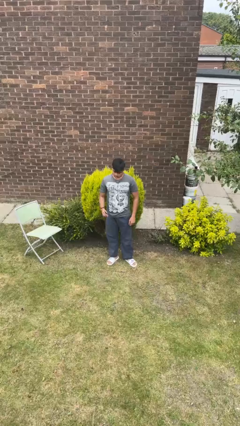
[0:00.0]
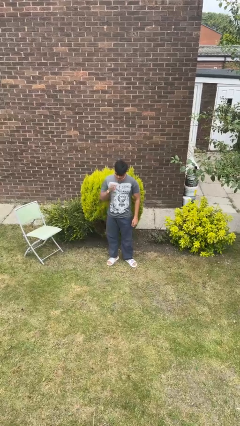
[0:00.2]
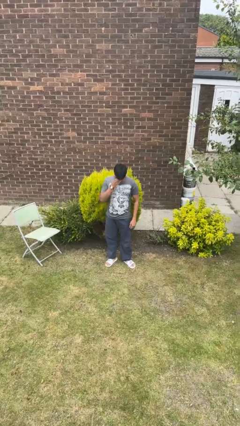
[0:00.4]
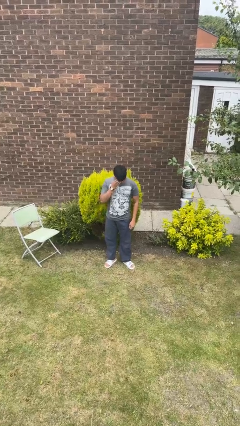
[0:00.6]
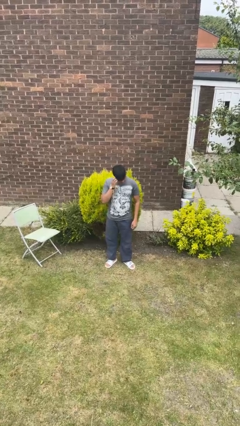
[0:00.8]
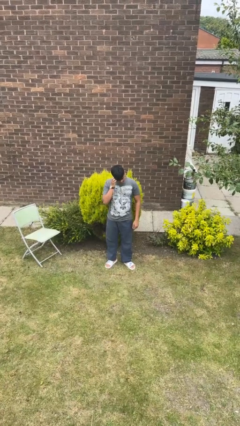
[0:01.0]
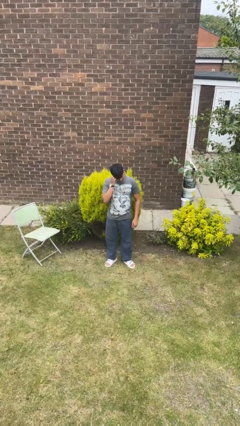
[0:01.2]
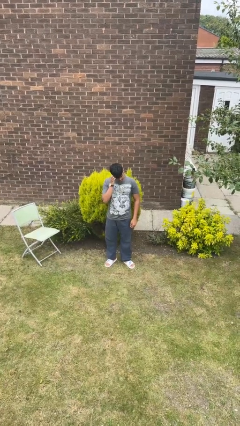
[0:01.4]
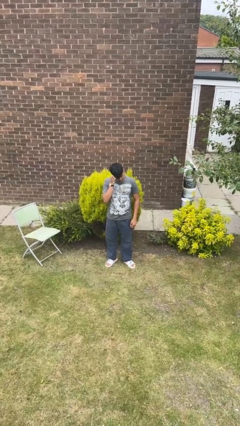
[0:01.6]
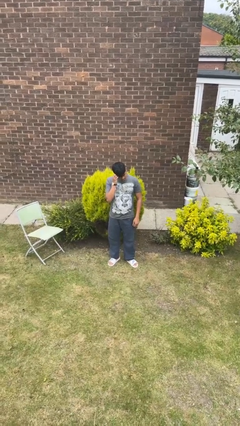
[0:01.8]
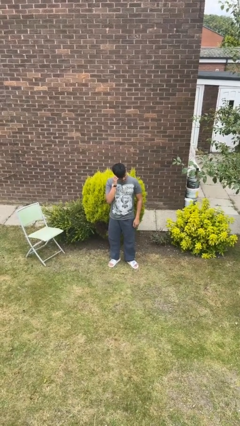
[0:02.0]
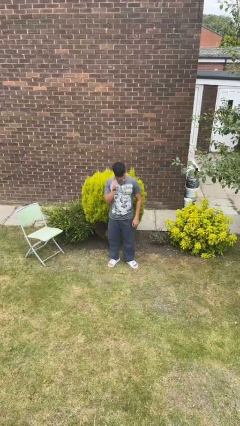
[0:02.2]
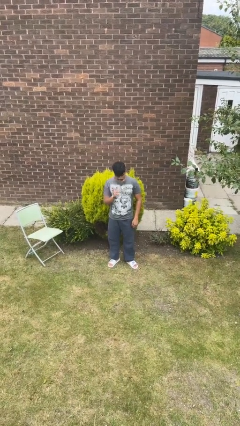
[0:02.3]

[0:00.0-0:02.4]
person scratches face

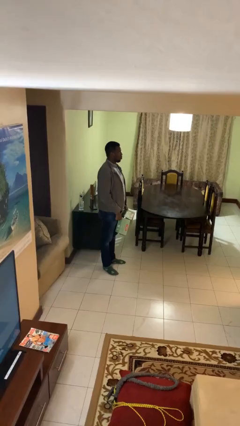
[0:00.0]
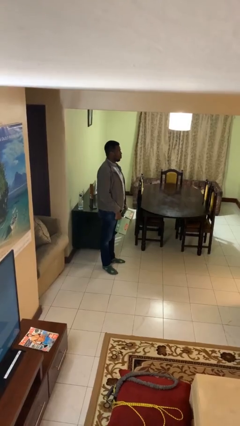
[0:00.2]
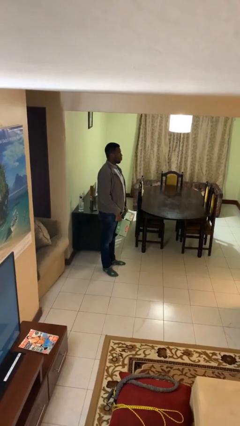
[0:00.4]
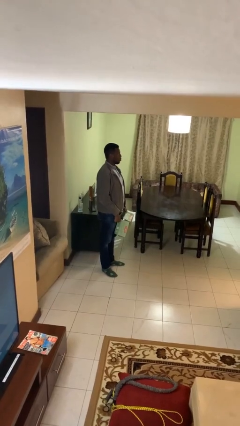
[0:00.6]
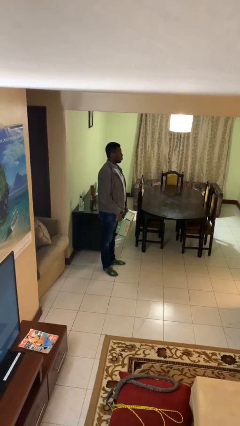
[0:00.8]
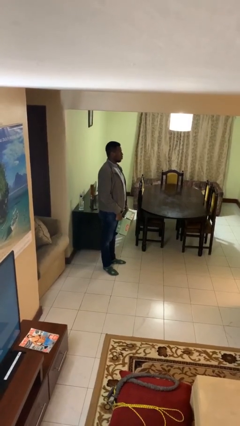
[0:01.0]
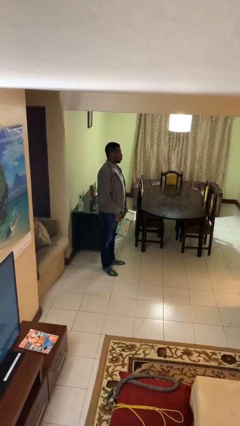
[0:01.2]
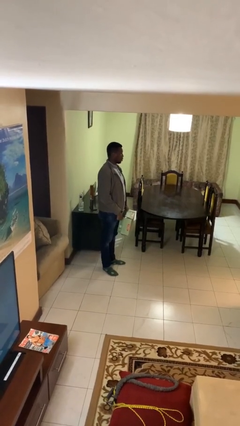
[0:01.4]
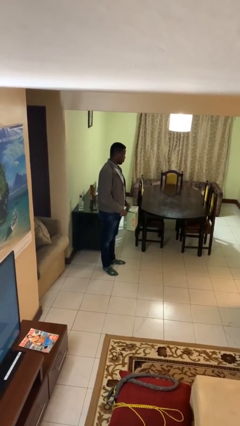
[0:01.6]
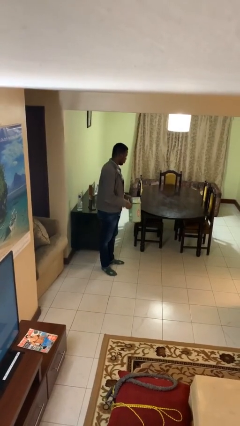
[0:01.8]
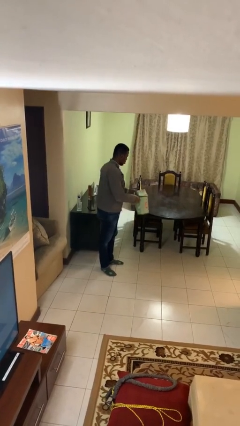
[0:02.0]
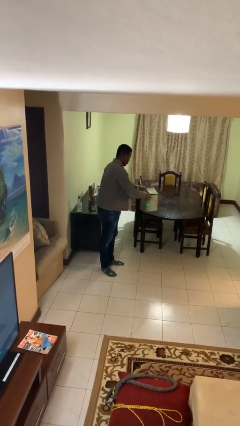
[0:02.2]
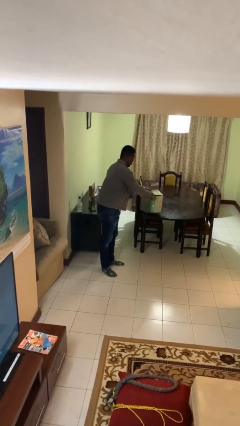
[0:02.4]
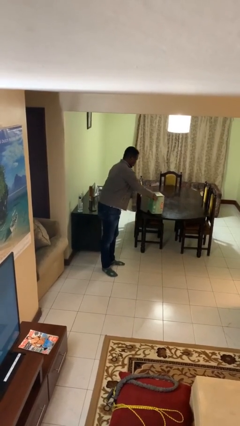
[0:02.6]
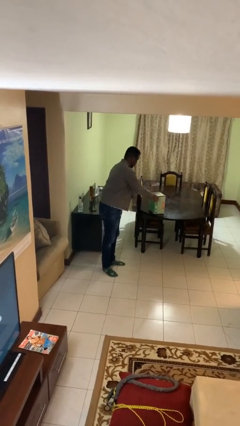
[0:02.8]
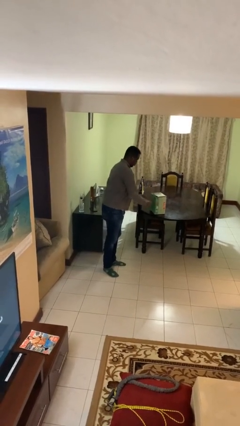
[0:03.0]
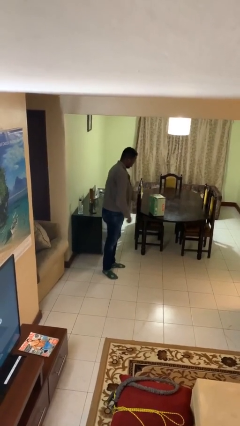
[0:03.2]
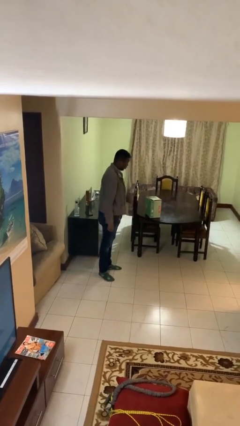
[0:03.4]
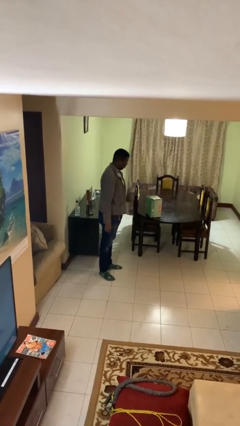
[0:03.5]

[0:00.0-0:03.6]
person puts down object on table

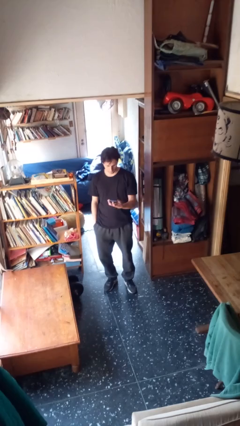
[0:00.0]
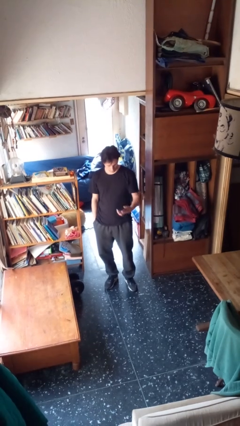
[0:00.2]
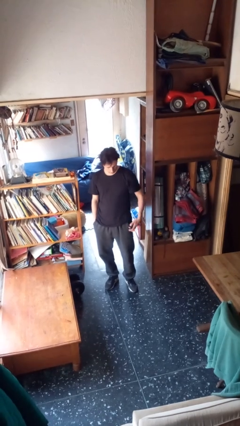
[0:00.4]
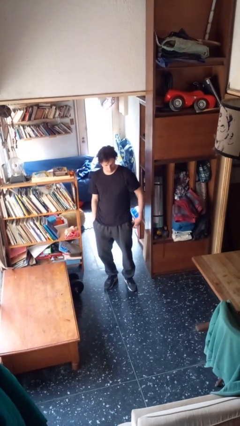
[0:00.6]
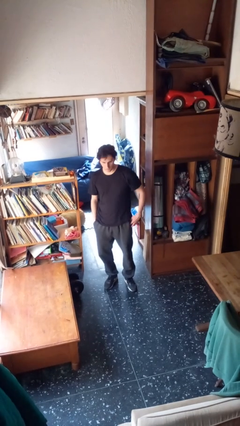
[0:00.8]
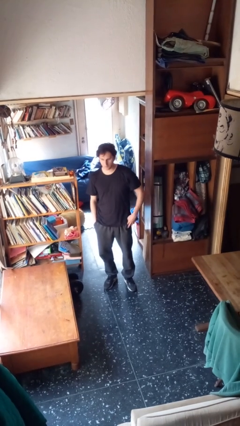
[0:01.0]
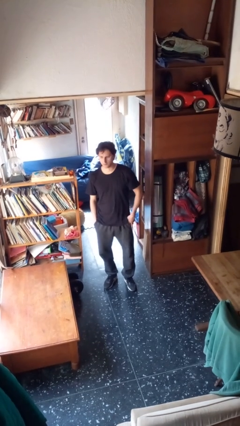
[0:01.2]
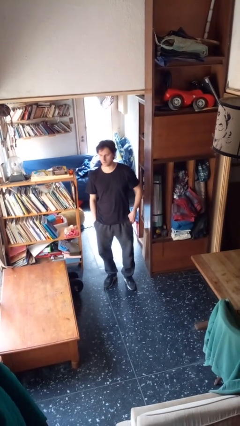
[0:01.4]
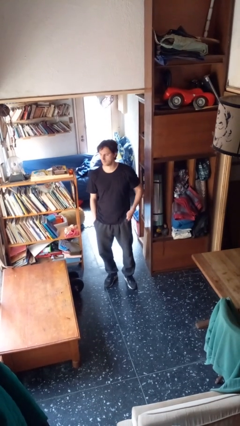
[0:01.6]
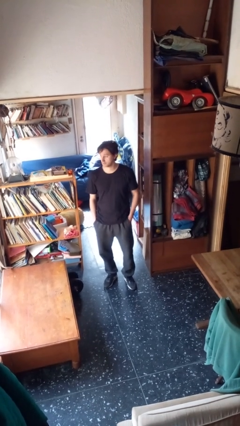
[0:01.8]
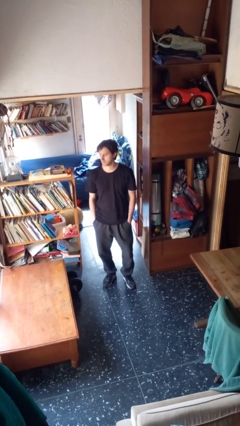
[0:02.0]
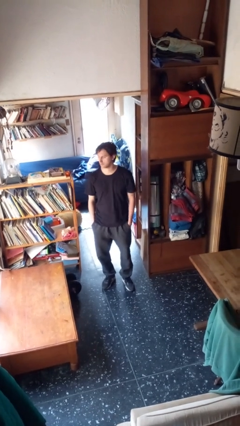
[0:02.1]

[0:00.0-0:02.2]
person puts phone into pocket

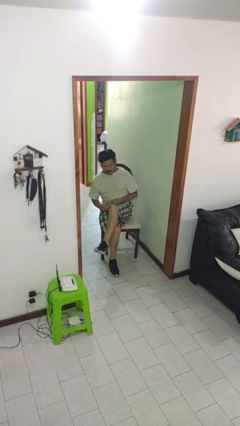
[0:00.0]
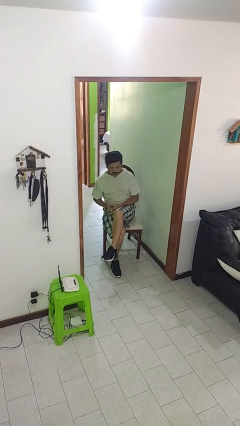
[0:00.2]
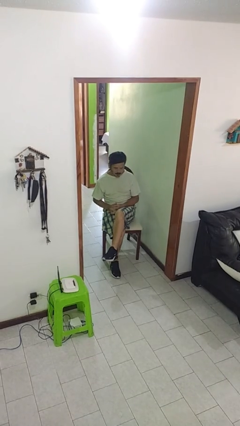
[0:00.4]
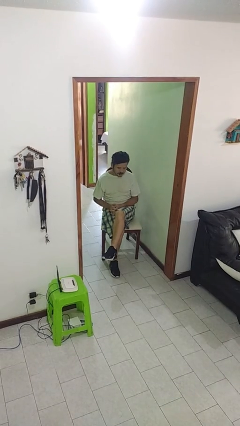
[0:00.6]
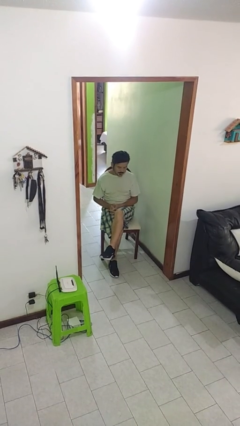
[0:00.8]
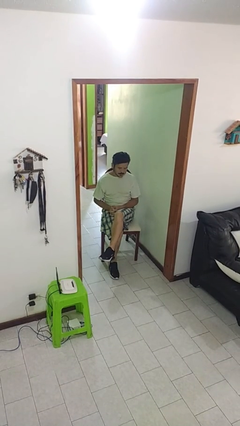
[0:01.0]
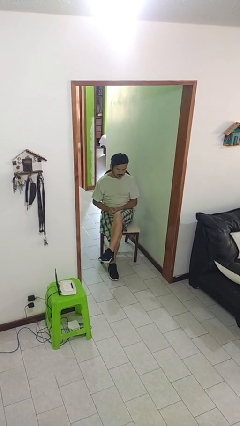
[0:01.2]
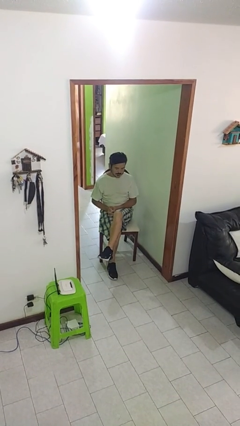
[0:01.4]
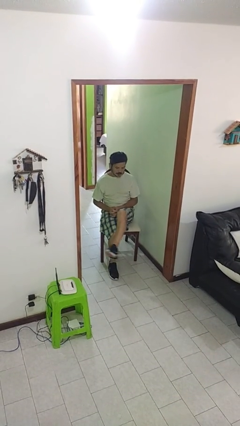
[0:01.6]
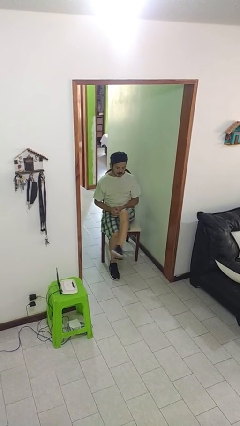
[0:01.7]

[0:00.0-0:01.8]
person crosses legs

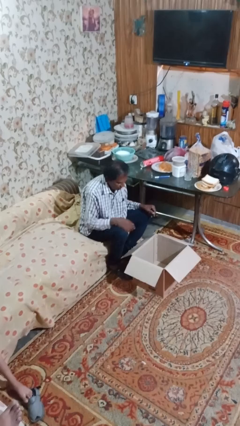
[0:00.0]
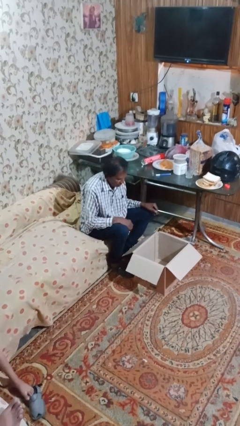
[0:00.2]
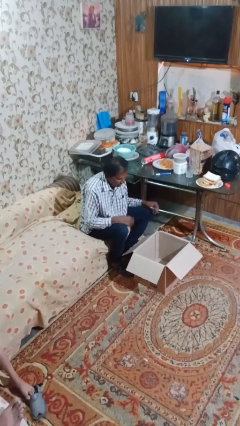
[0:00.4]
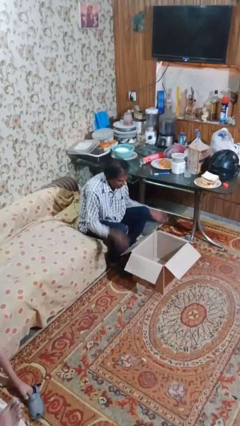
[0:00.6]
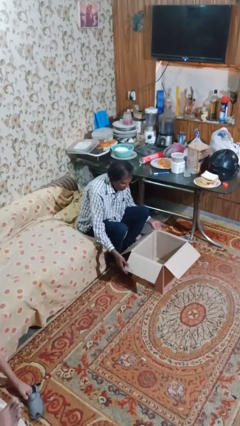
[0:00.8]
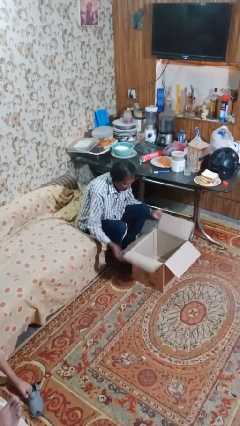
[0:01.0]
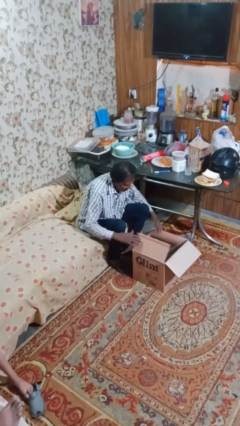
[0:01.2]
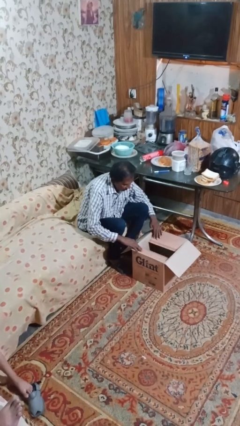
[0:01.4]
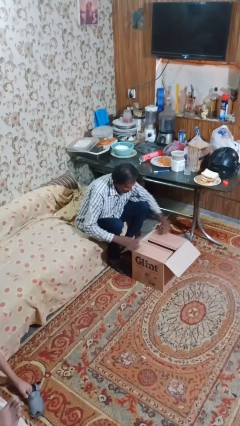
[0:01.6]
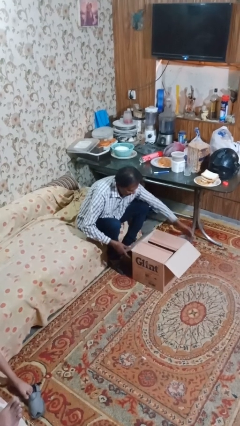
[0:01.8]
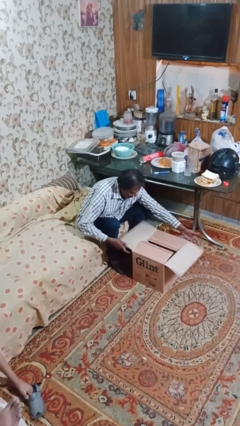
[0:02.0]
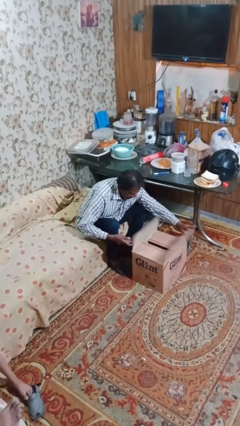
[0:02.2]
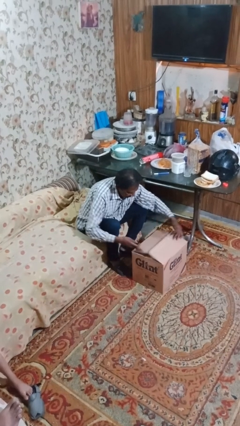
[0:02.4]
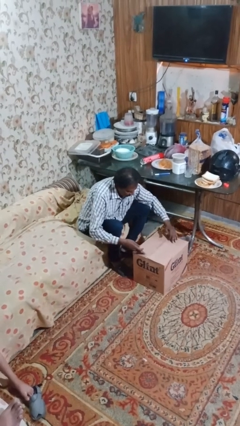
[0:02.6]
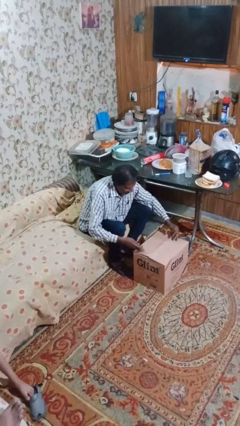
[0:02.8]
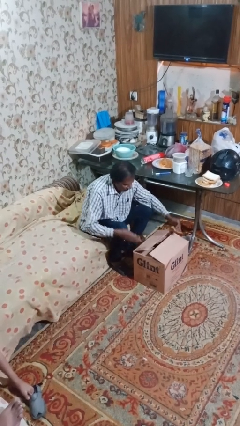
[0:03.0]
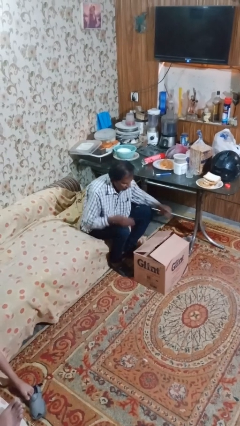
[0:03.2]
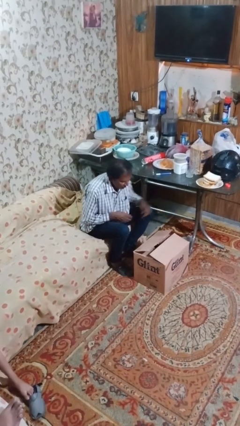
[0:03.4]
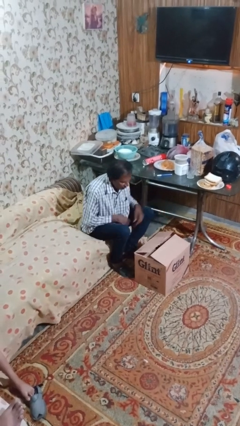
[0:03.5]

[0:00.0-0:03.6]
person closes box

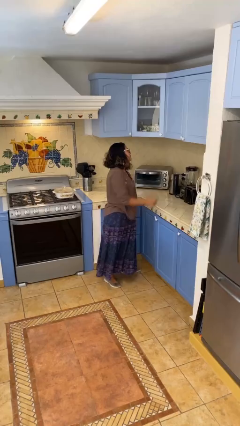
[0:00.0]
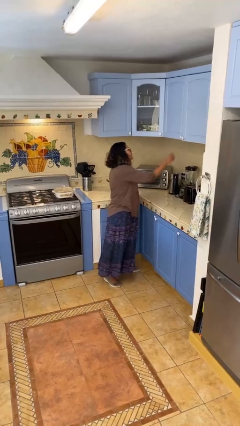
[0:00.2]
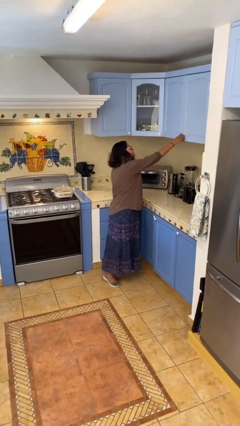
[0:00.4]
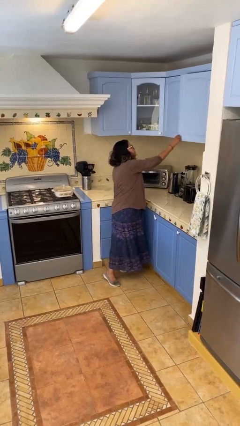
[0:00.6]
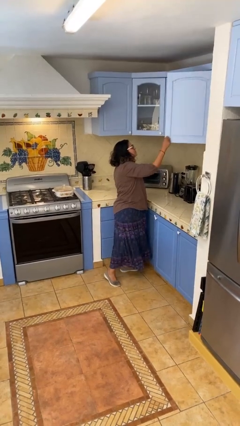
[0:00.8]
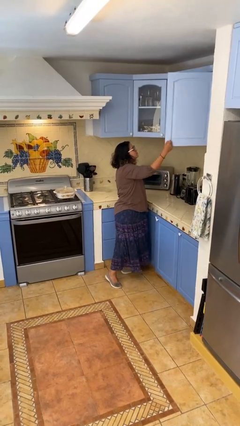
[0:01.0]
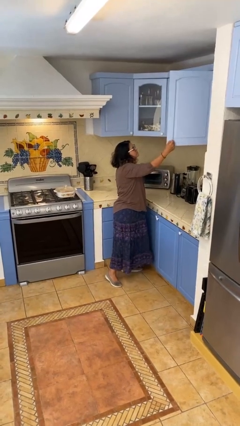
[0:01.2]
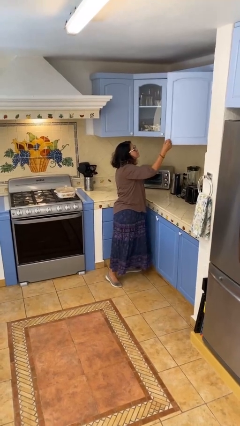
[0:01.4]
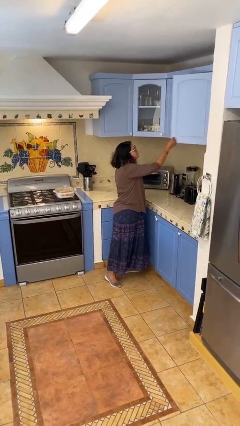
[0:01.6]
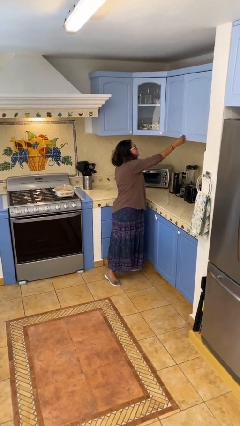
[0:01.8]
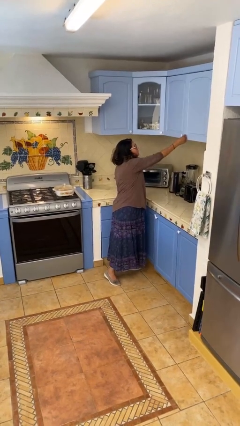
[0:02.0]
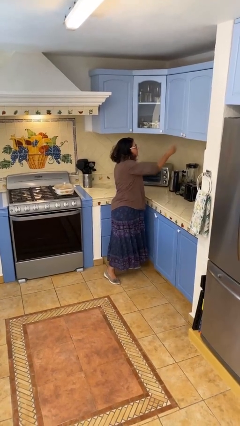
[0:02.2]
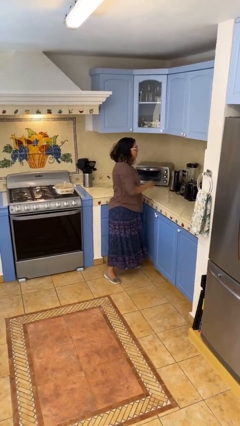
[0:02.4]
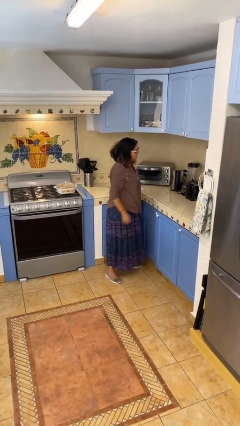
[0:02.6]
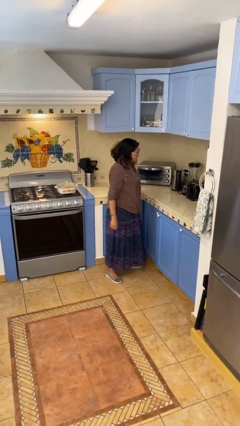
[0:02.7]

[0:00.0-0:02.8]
person closes cabinet

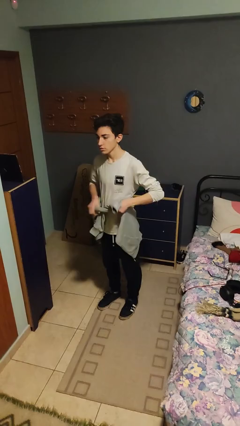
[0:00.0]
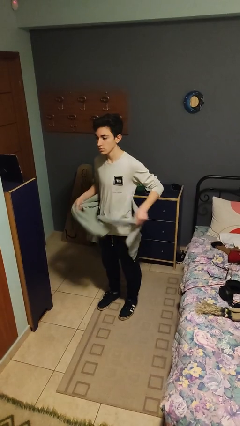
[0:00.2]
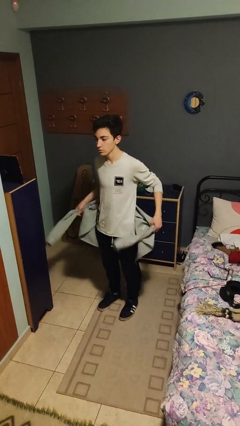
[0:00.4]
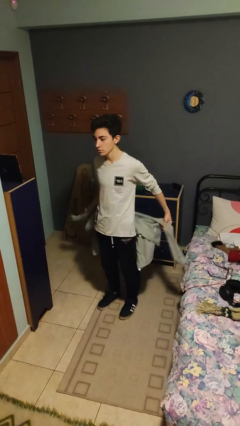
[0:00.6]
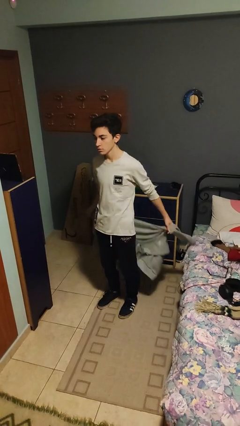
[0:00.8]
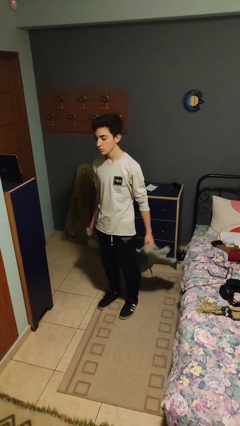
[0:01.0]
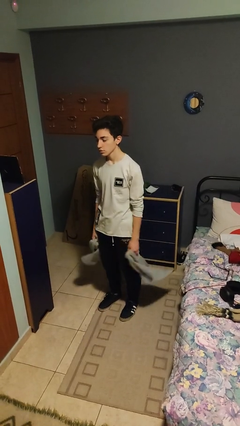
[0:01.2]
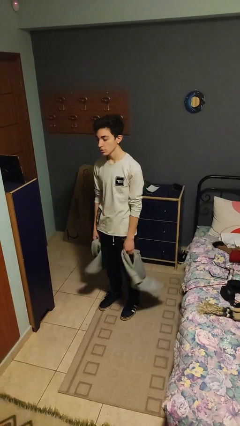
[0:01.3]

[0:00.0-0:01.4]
person unties jacket around waist
